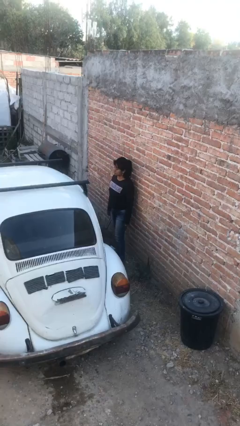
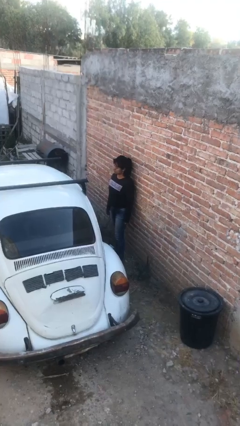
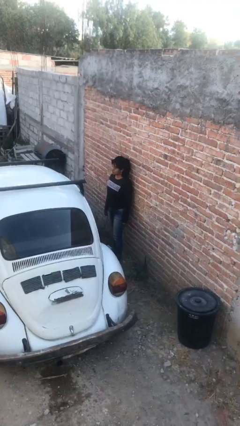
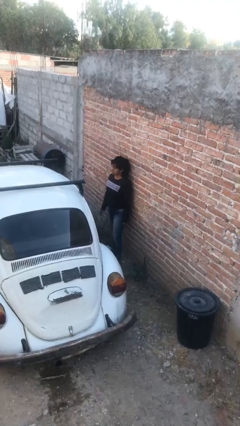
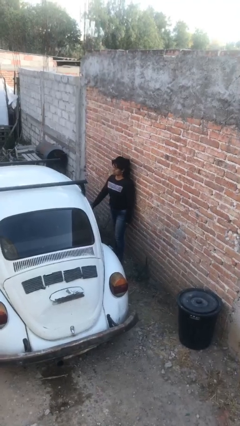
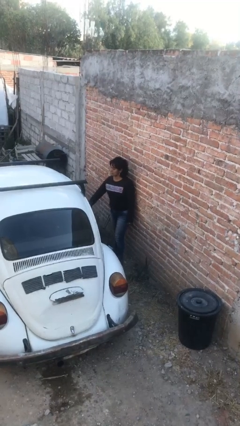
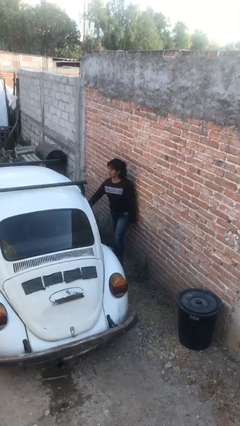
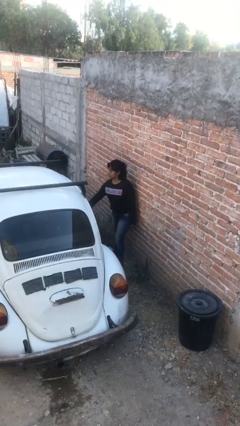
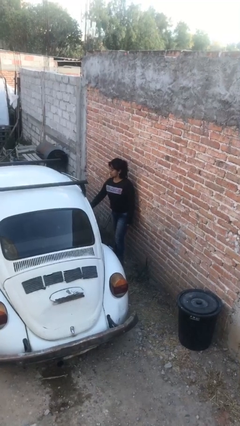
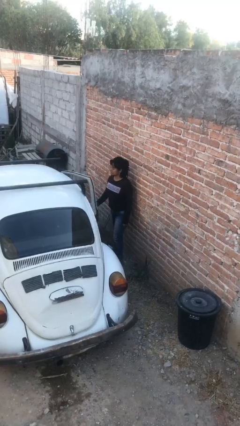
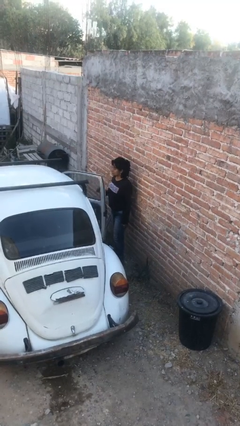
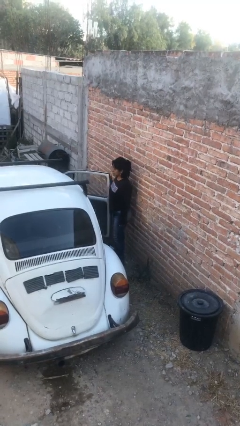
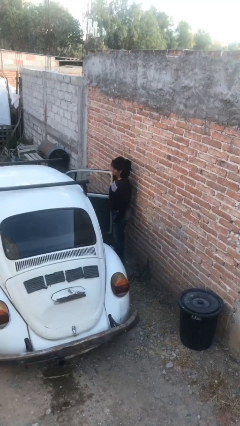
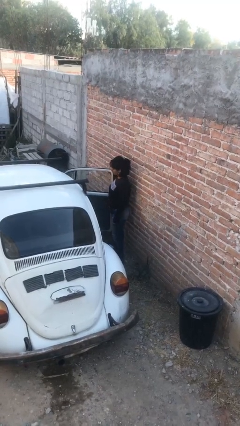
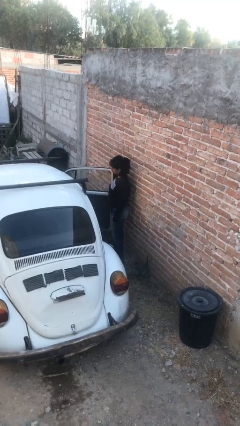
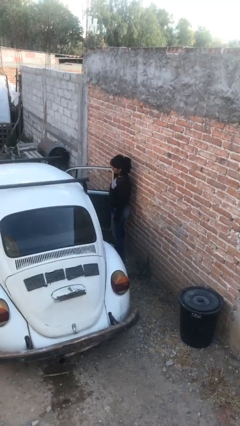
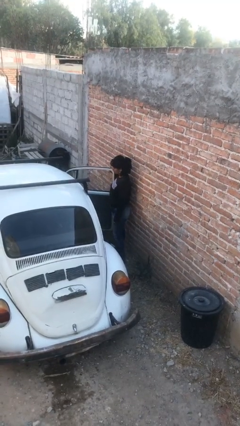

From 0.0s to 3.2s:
person opens car door

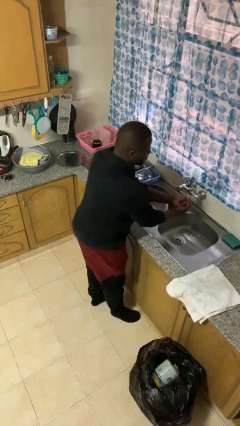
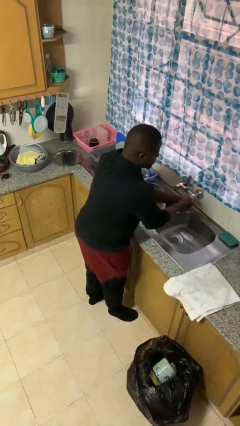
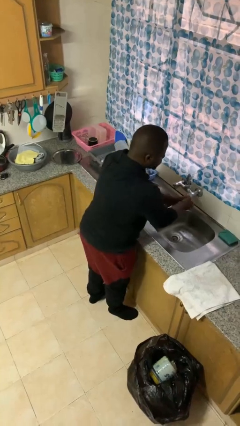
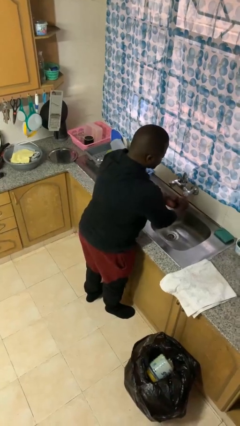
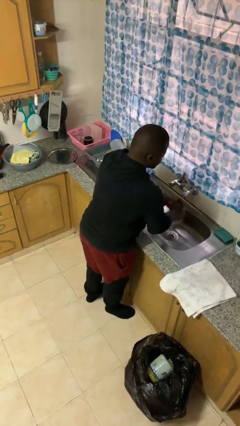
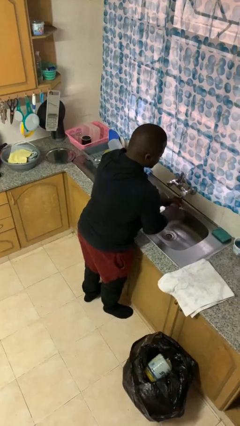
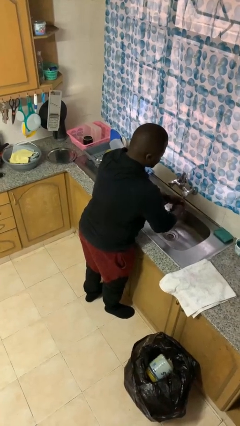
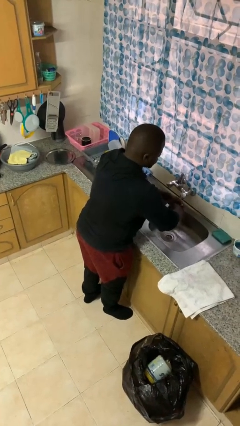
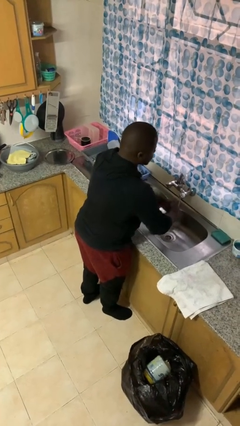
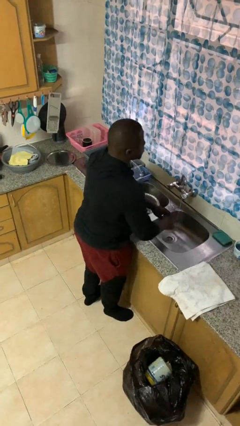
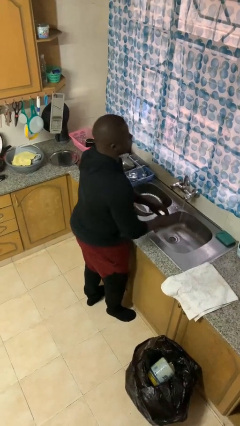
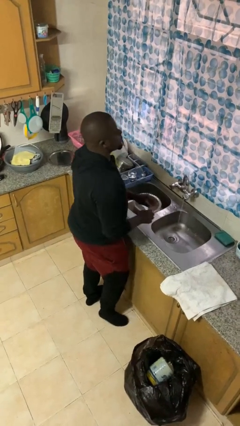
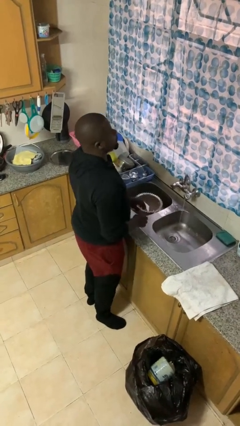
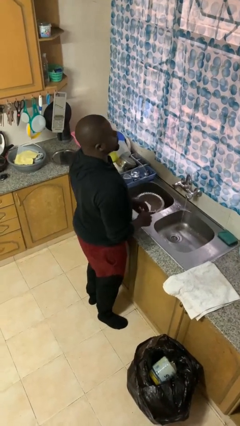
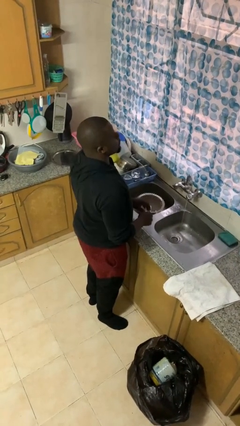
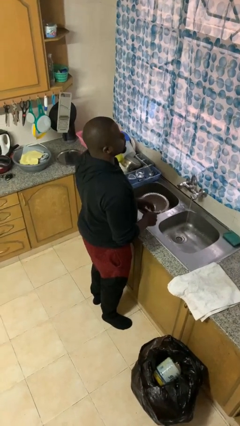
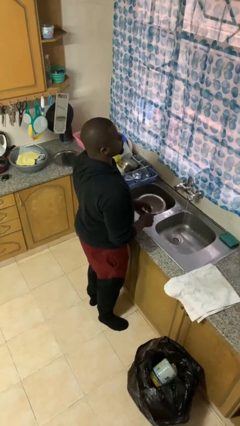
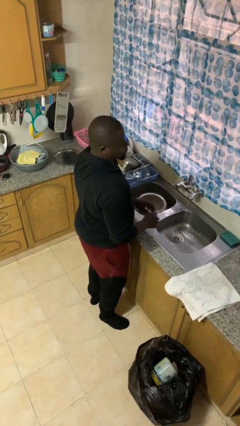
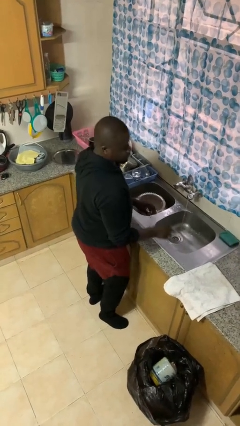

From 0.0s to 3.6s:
person washes hands

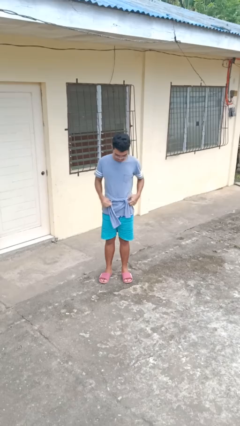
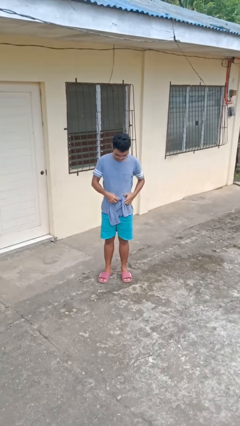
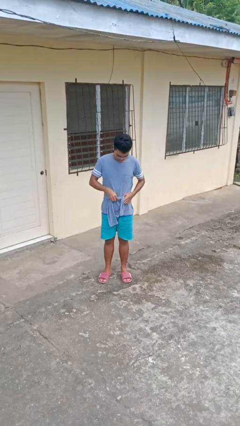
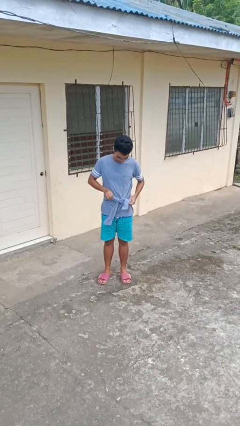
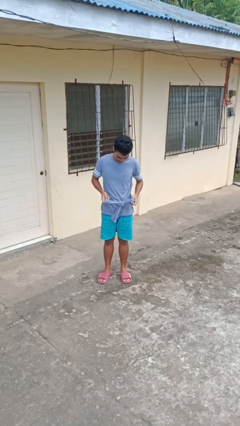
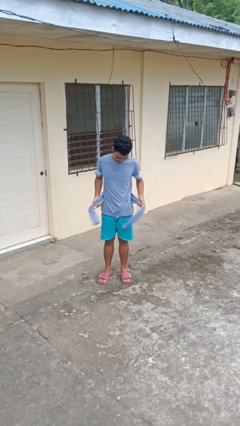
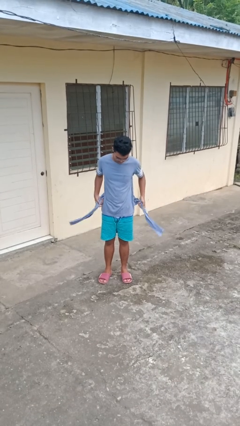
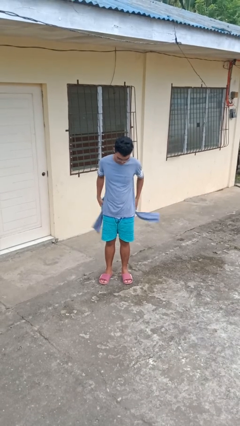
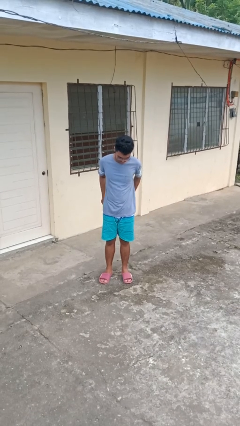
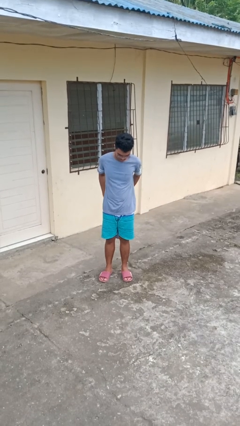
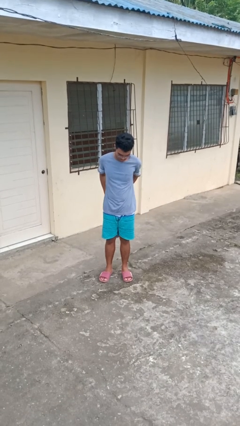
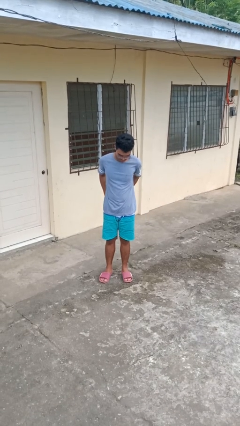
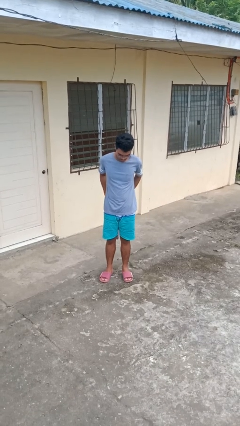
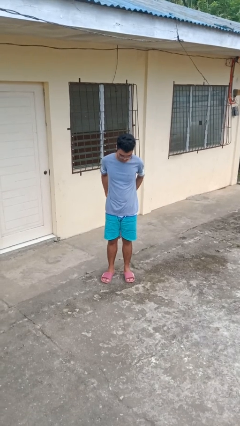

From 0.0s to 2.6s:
person unties jacket around waist

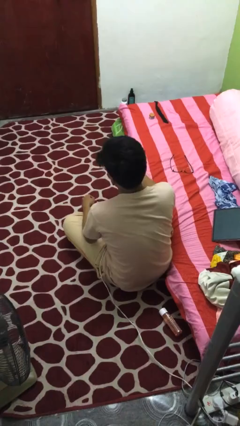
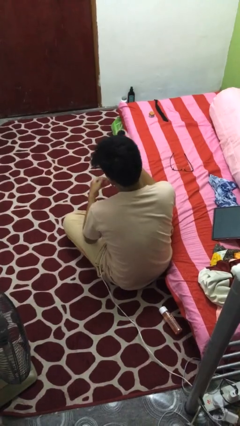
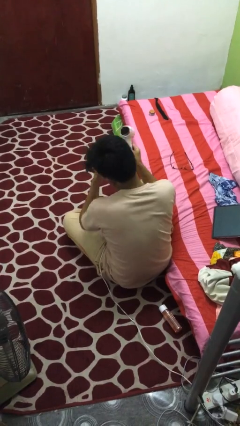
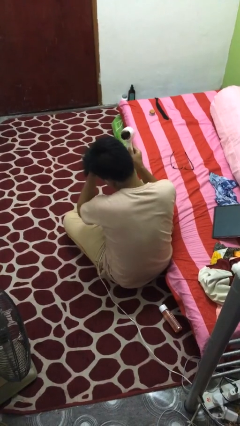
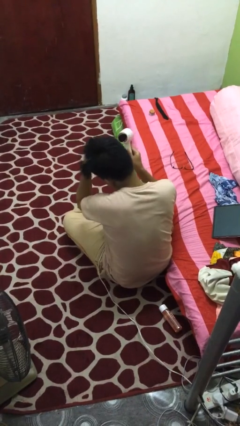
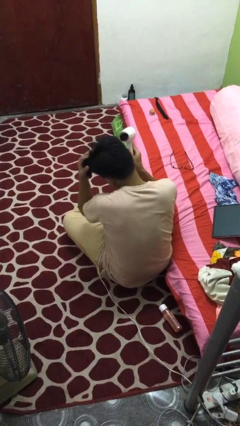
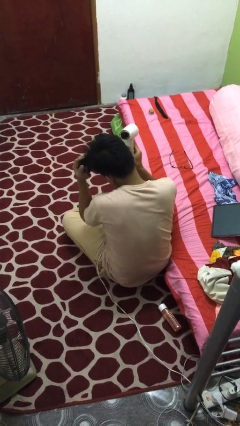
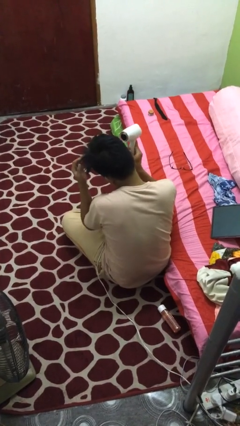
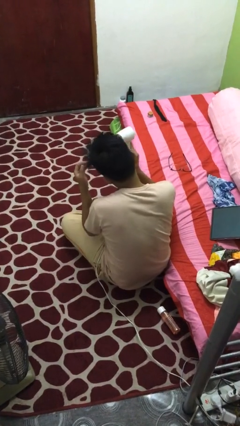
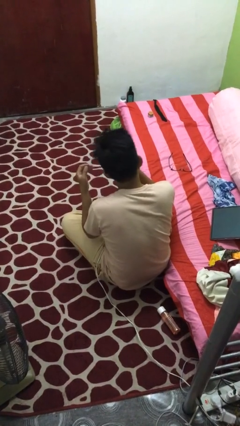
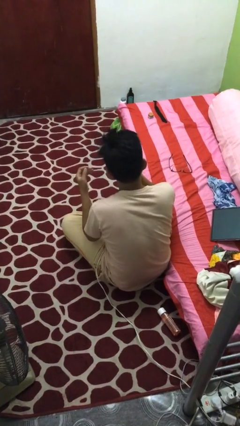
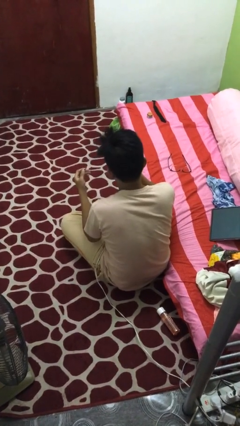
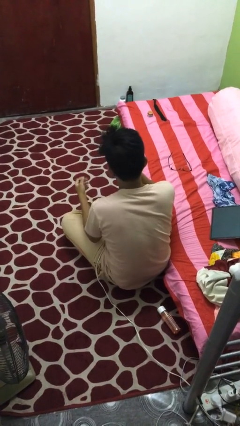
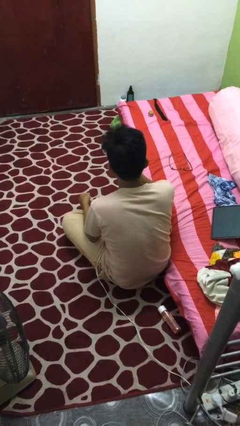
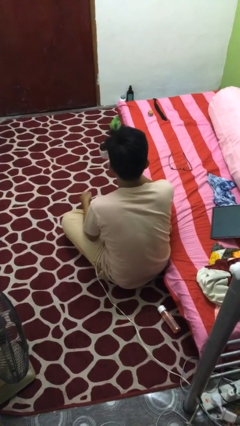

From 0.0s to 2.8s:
person dries hair with hairdryer

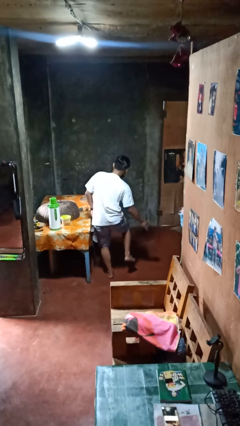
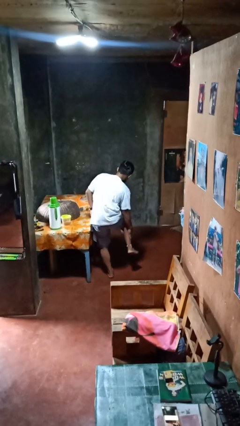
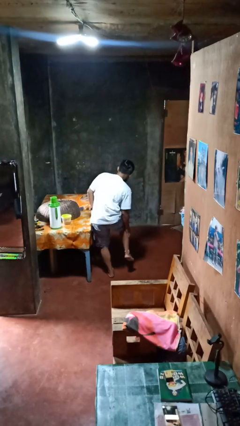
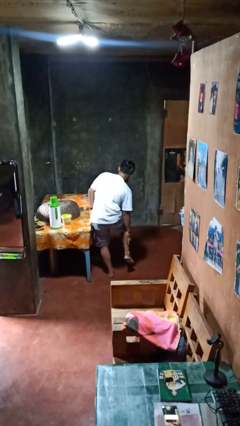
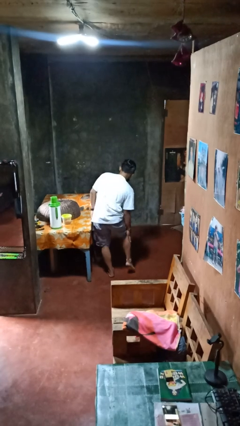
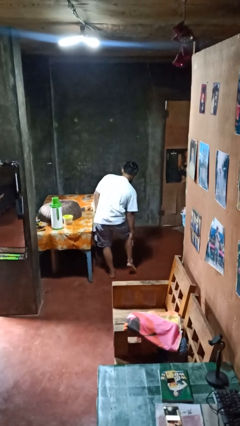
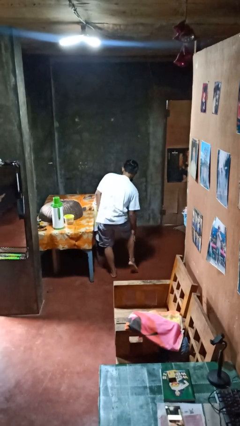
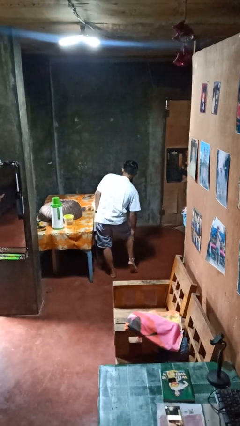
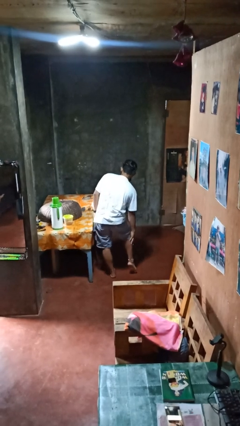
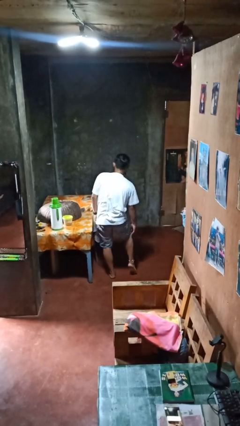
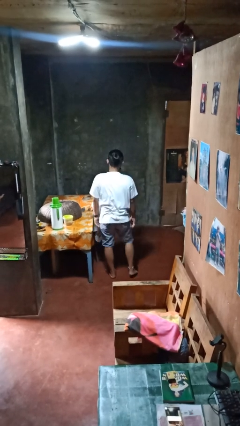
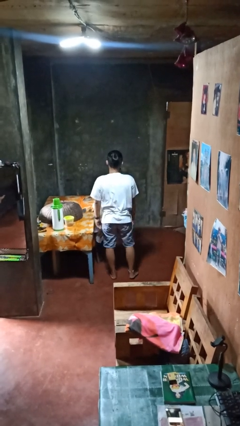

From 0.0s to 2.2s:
person swats bug

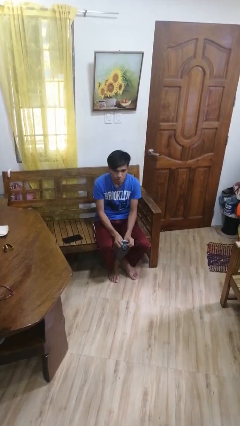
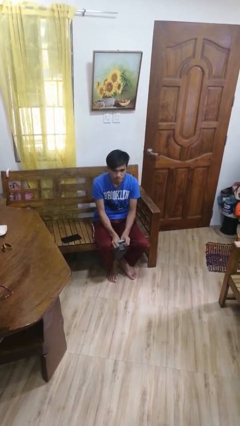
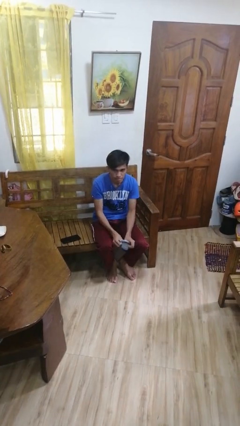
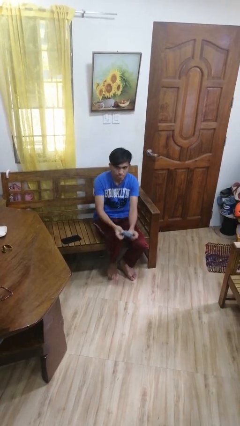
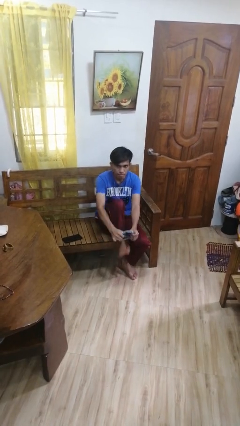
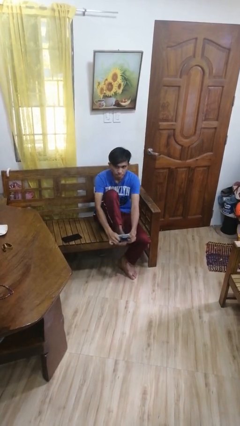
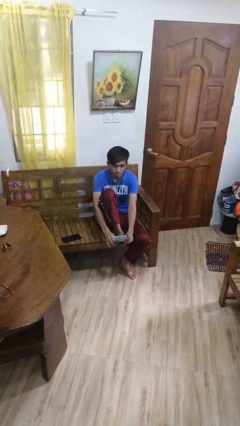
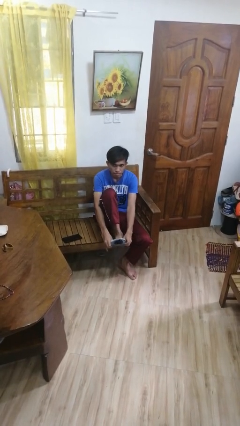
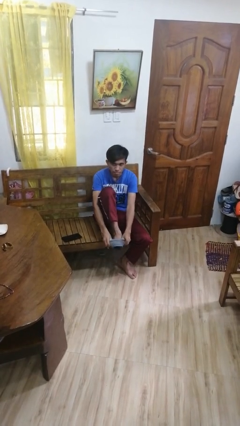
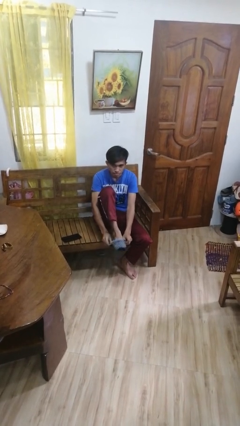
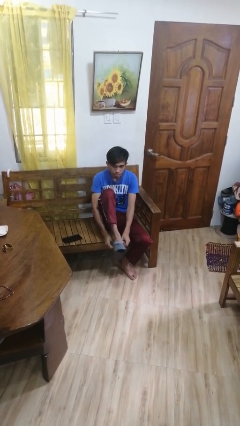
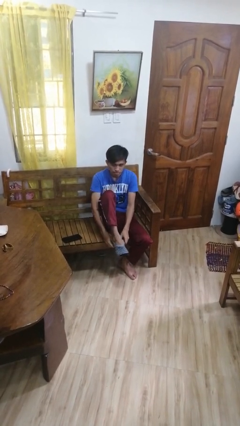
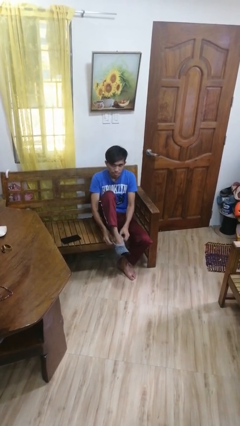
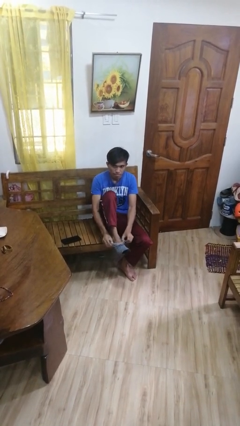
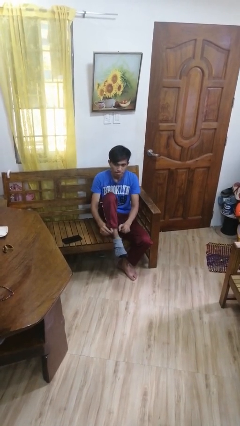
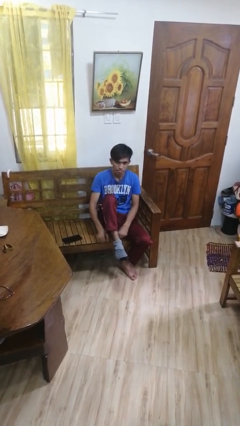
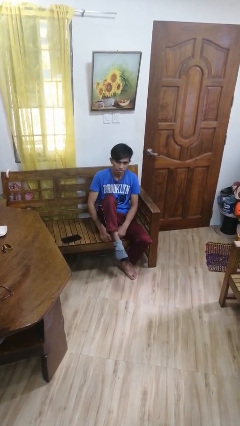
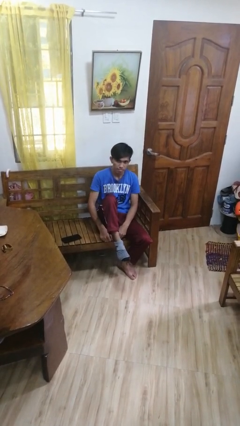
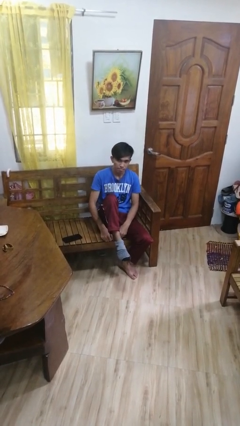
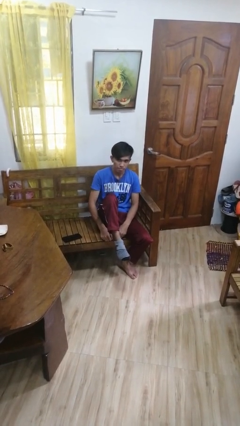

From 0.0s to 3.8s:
person puts on socks
